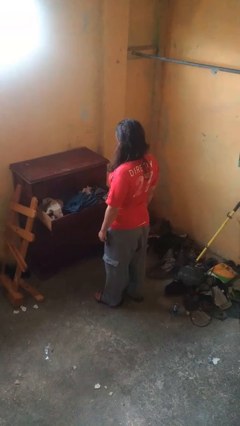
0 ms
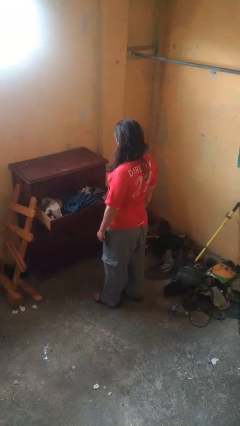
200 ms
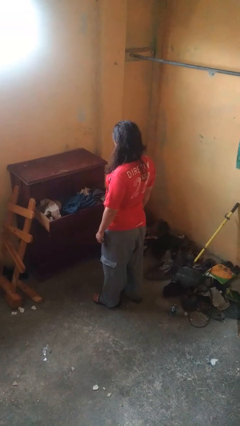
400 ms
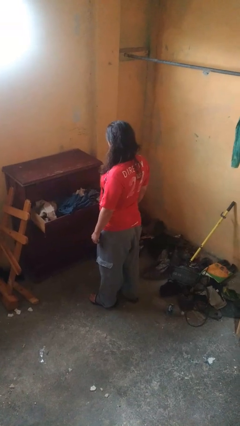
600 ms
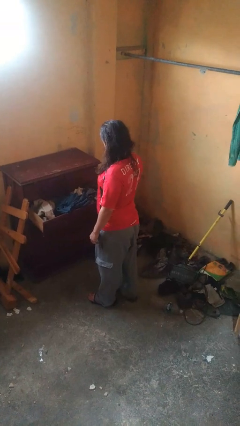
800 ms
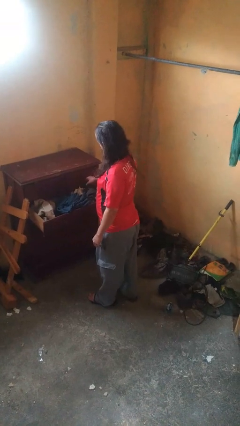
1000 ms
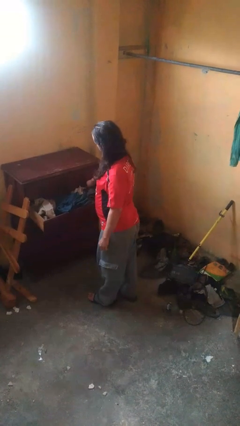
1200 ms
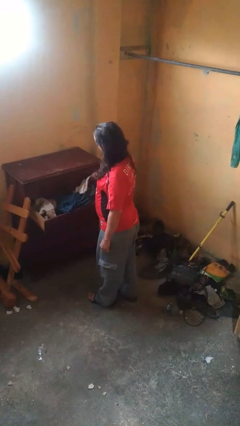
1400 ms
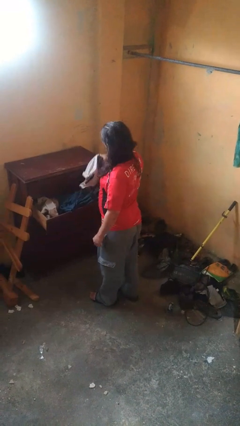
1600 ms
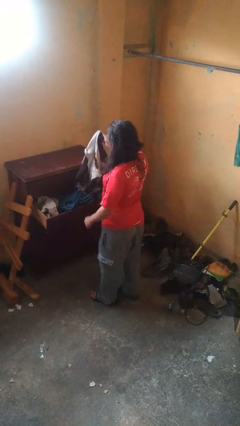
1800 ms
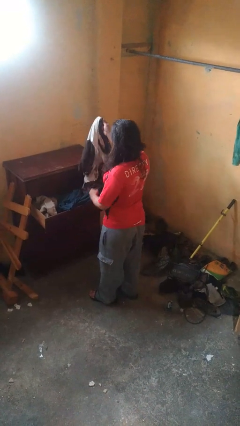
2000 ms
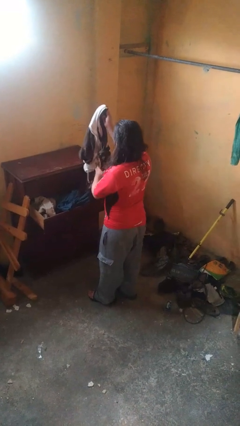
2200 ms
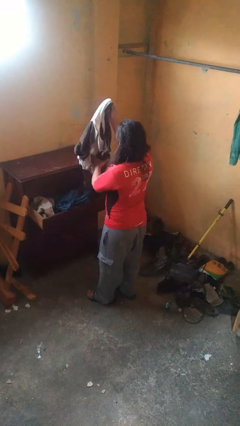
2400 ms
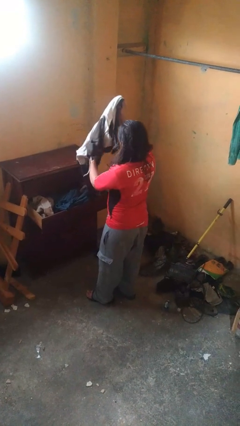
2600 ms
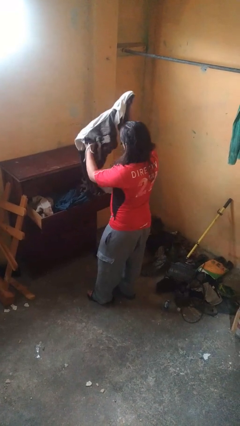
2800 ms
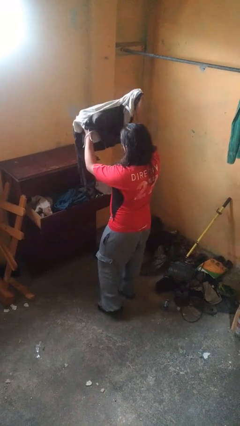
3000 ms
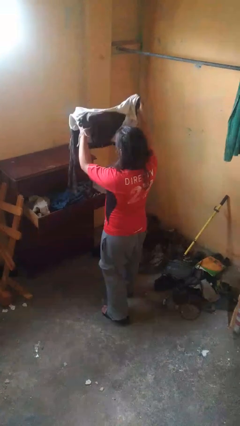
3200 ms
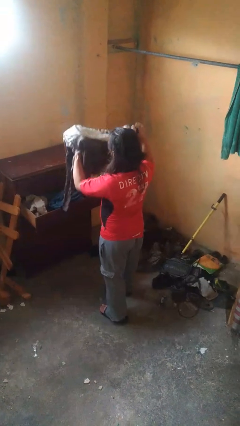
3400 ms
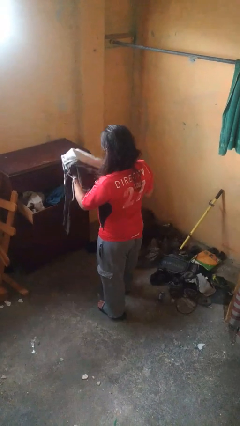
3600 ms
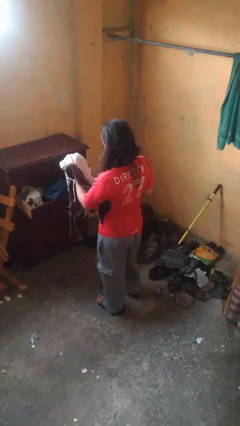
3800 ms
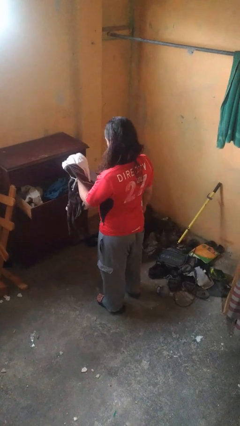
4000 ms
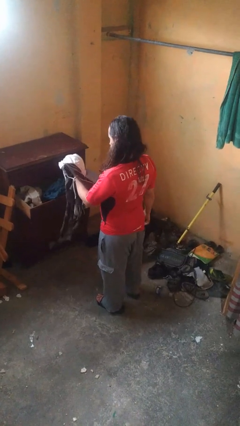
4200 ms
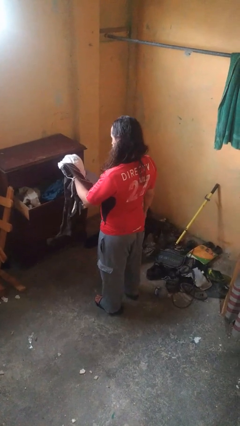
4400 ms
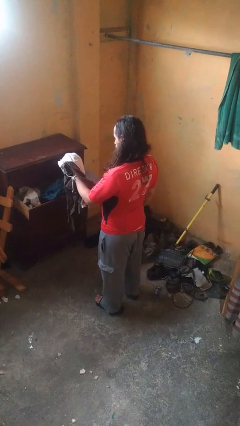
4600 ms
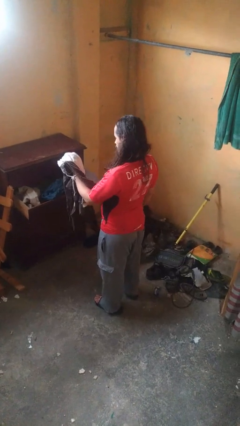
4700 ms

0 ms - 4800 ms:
person takes clothes from dresser

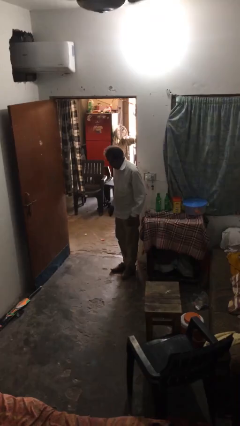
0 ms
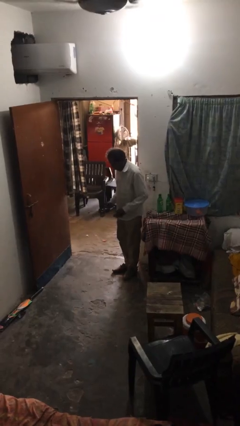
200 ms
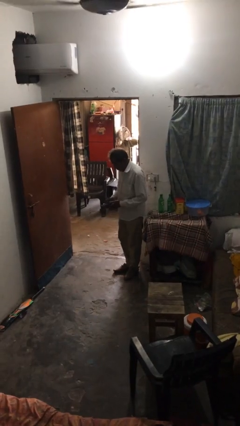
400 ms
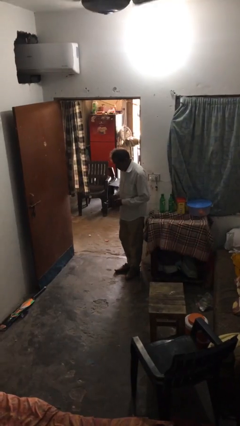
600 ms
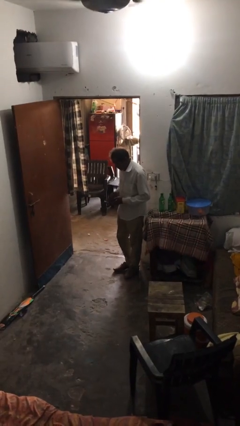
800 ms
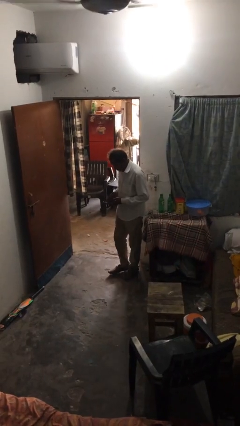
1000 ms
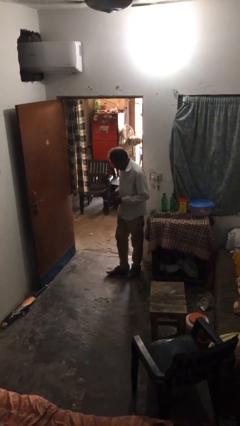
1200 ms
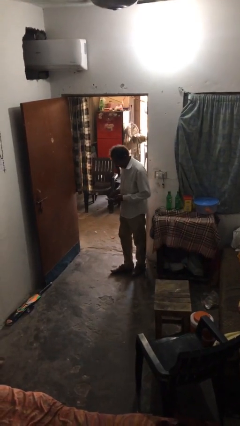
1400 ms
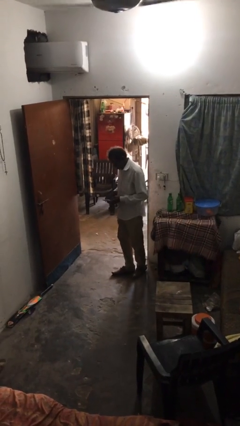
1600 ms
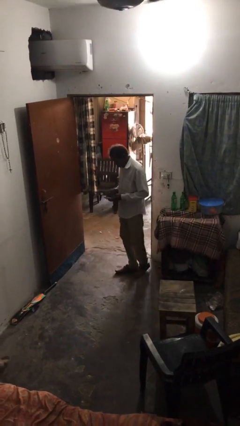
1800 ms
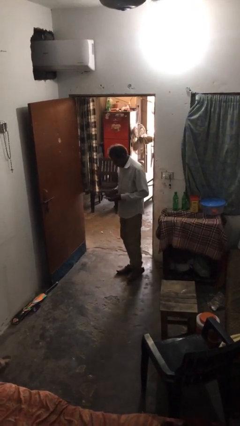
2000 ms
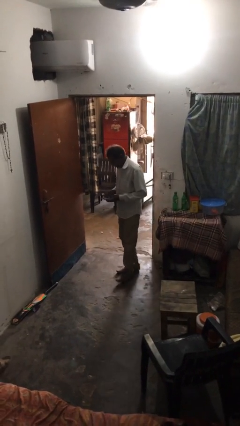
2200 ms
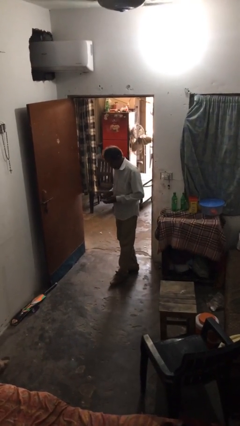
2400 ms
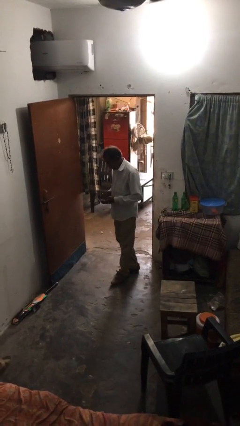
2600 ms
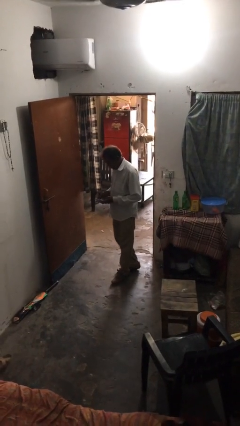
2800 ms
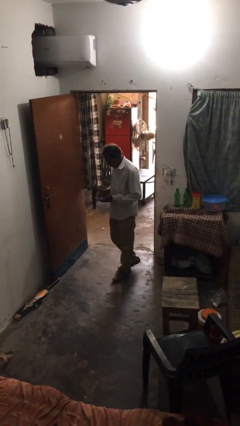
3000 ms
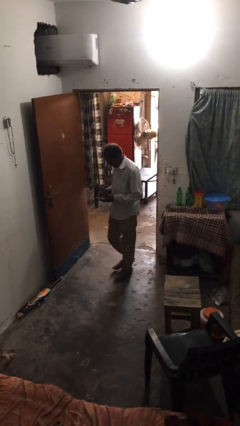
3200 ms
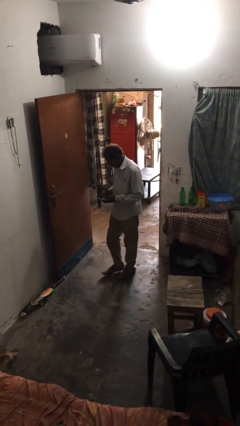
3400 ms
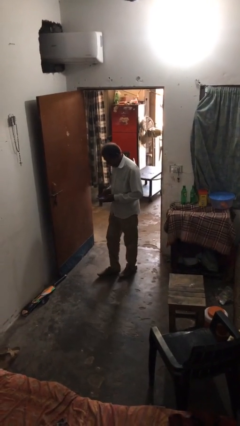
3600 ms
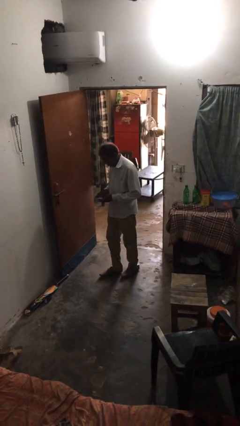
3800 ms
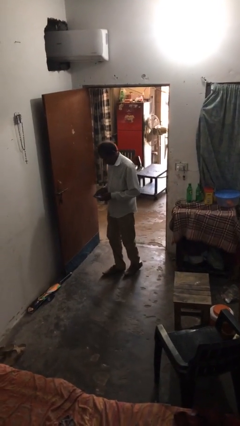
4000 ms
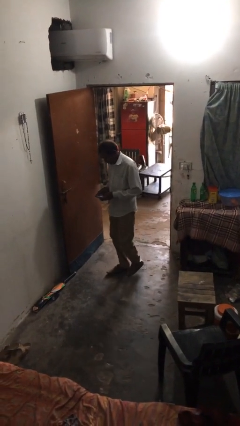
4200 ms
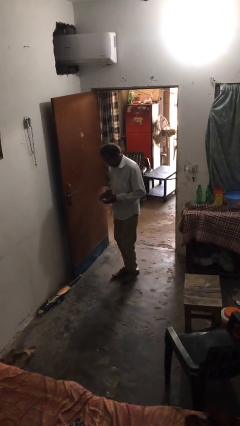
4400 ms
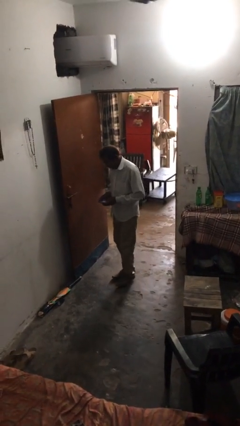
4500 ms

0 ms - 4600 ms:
person texts on phone

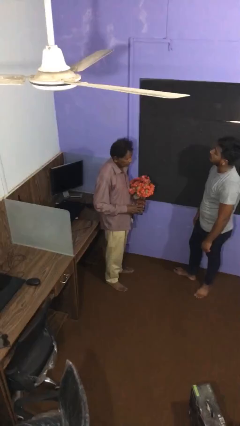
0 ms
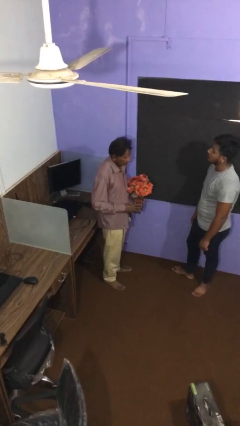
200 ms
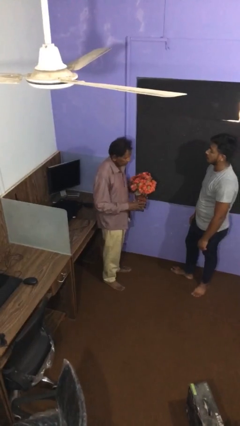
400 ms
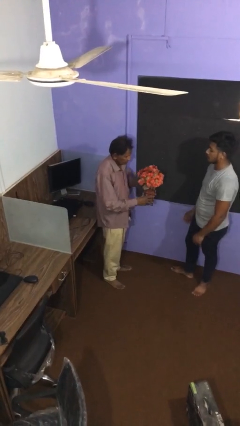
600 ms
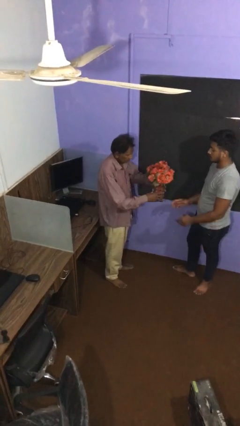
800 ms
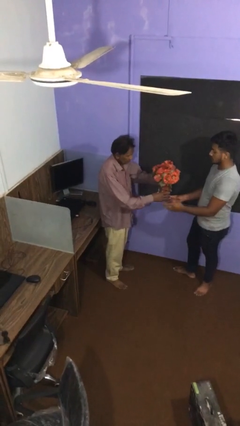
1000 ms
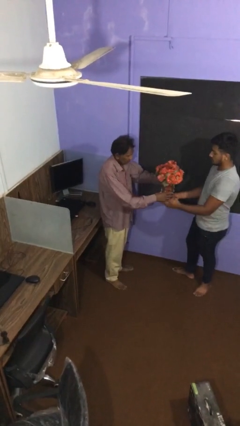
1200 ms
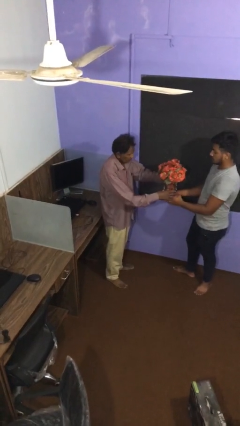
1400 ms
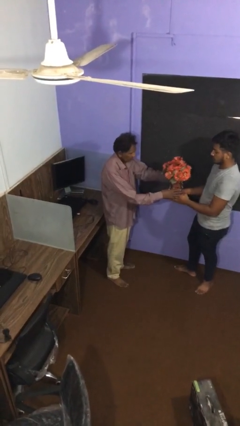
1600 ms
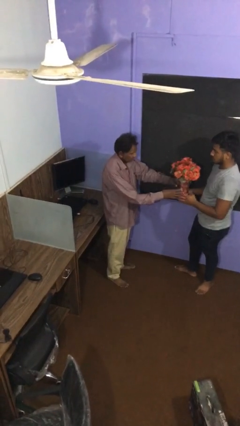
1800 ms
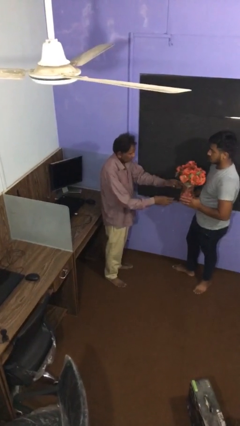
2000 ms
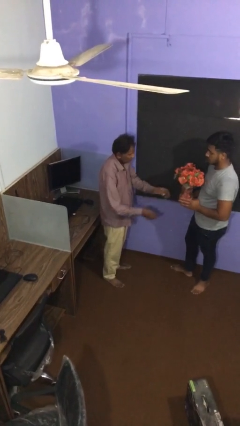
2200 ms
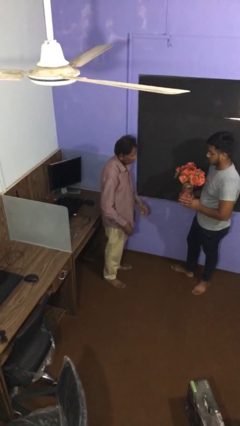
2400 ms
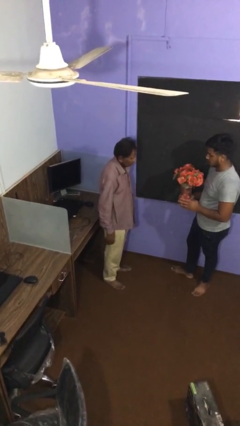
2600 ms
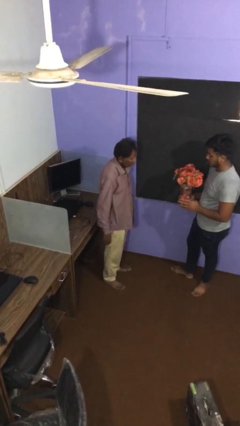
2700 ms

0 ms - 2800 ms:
person transfers object to person

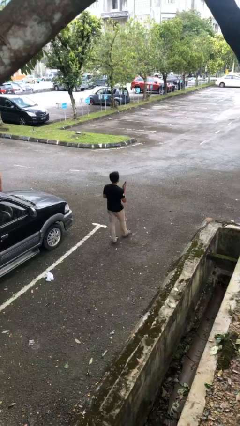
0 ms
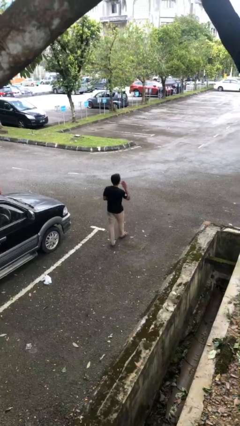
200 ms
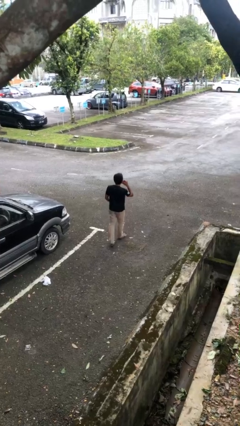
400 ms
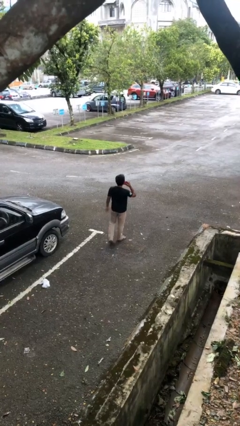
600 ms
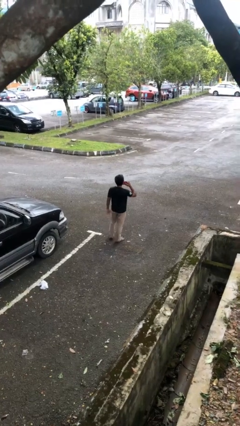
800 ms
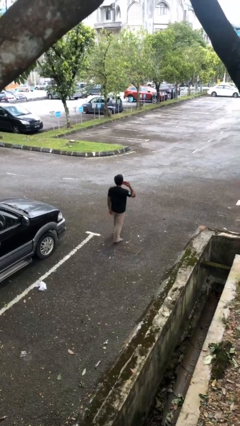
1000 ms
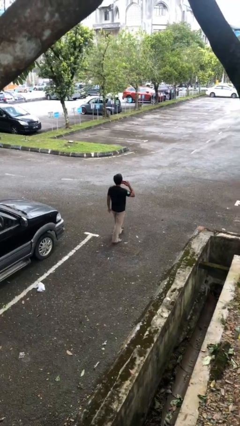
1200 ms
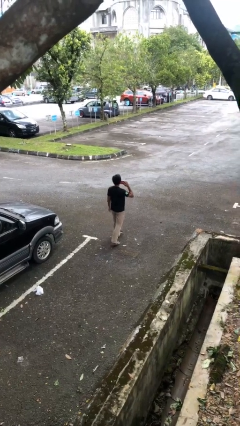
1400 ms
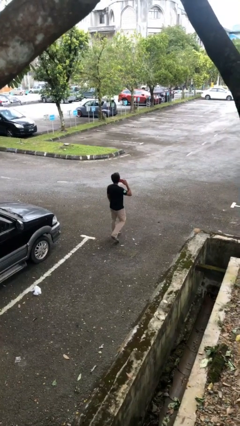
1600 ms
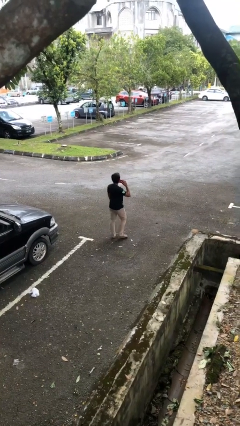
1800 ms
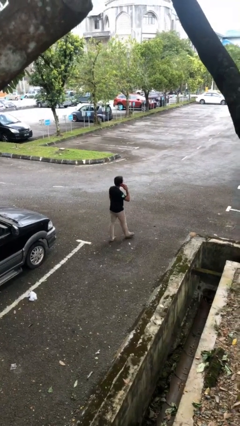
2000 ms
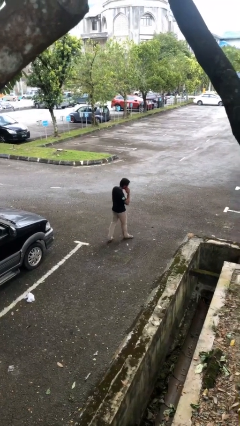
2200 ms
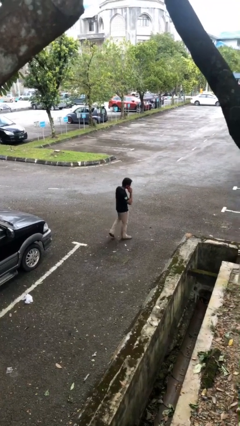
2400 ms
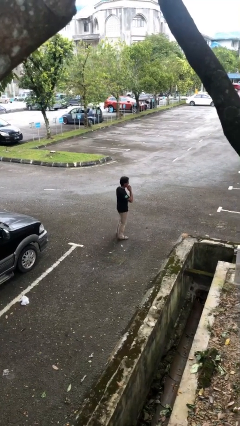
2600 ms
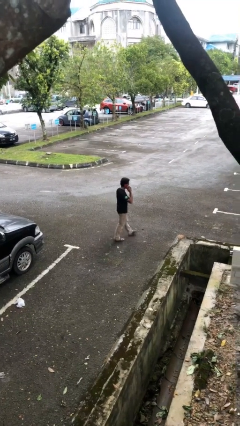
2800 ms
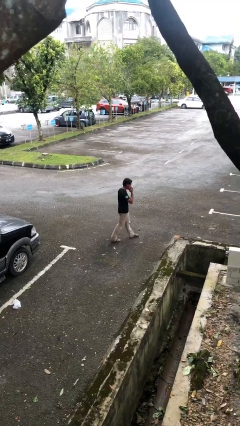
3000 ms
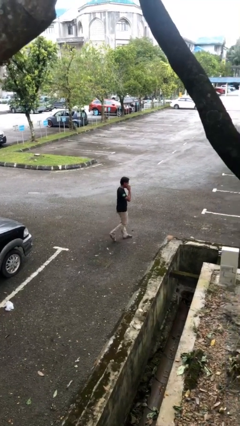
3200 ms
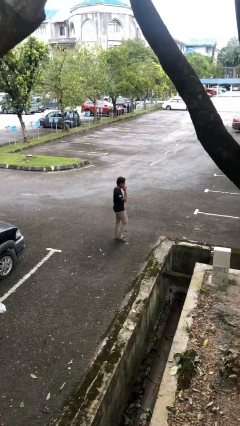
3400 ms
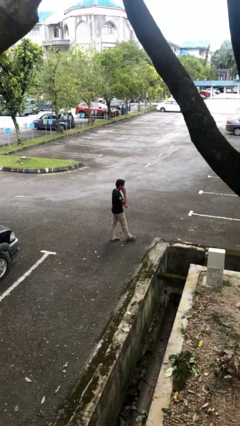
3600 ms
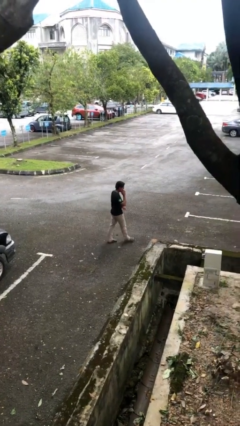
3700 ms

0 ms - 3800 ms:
person talks on phone

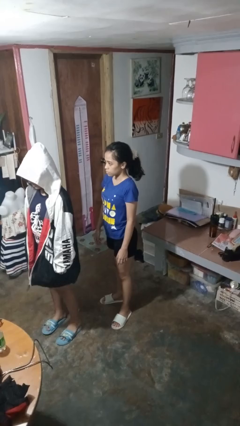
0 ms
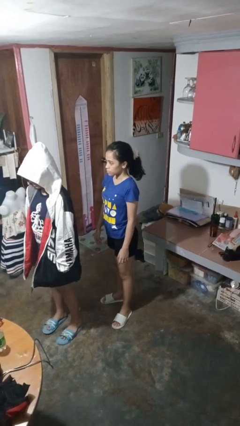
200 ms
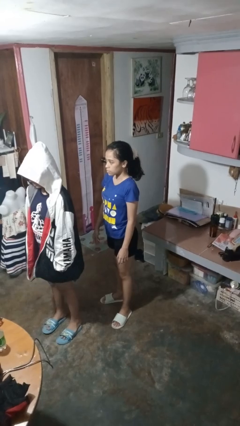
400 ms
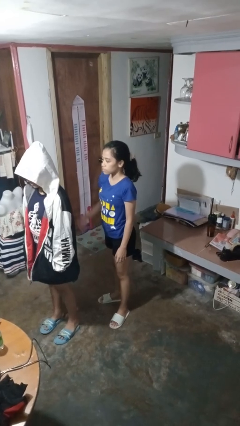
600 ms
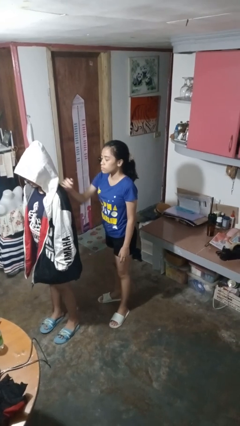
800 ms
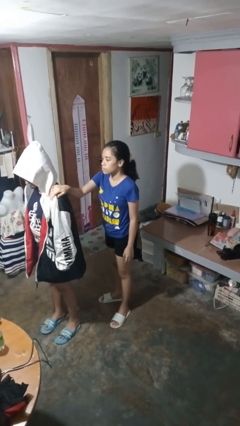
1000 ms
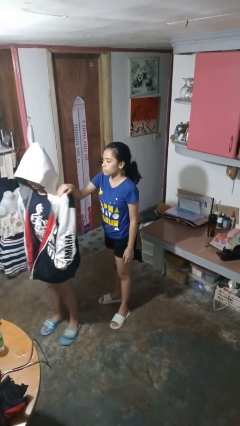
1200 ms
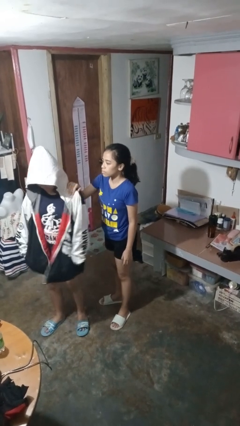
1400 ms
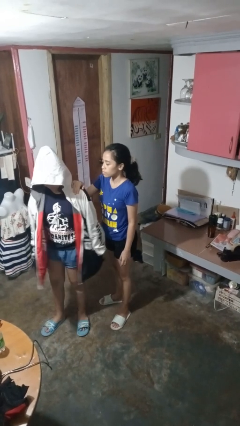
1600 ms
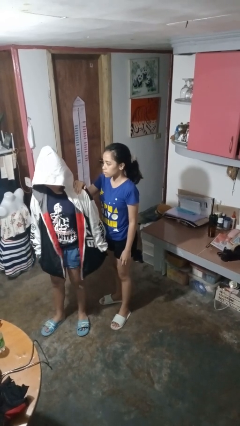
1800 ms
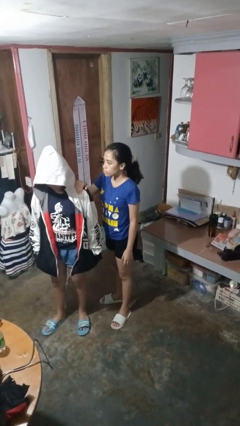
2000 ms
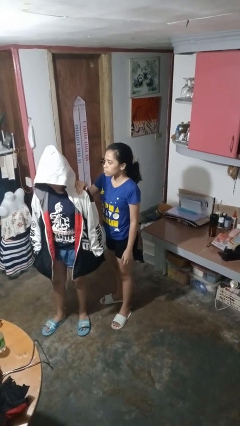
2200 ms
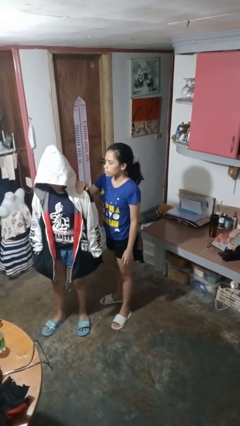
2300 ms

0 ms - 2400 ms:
person grabs person by shoulder
